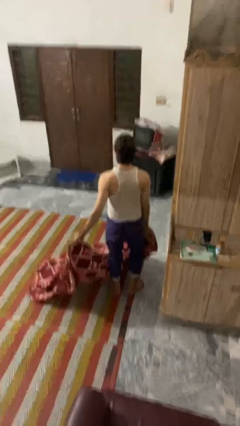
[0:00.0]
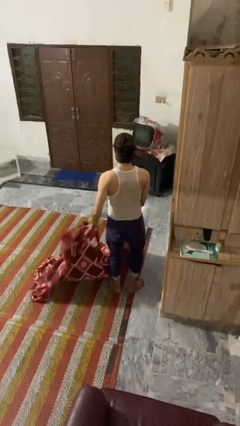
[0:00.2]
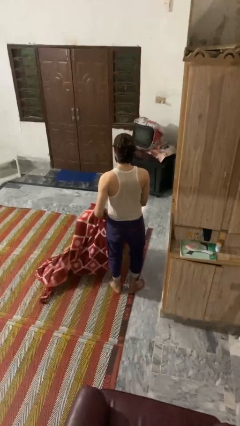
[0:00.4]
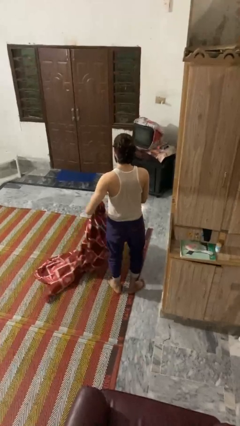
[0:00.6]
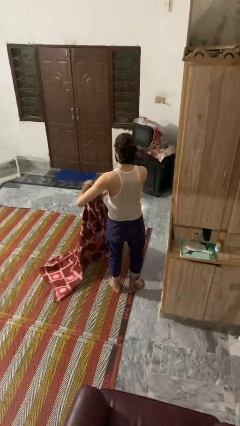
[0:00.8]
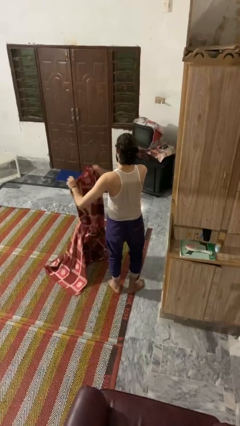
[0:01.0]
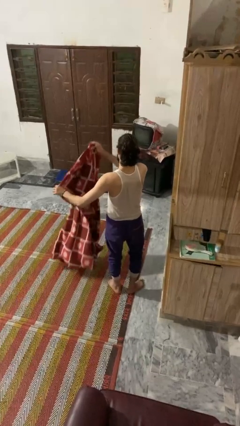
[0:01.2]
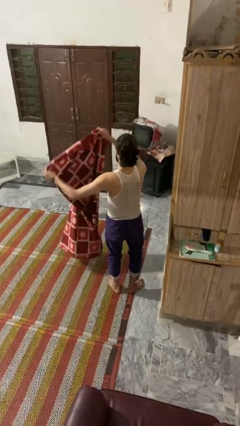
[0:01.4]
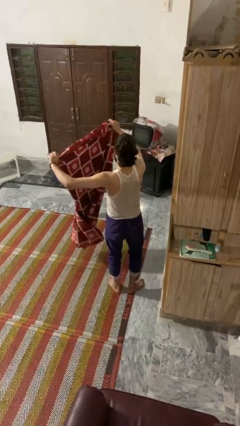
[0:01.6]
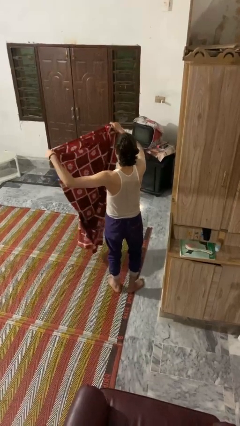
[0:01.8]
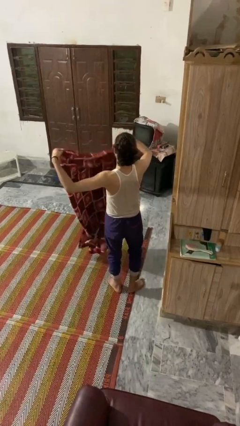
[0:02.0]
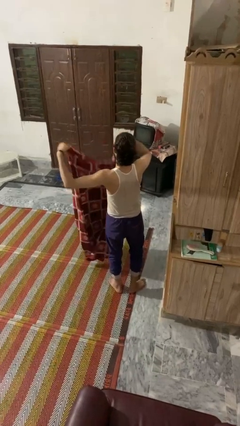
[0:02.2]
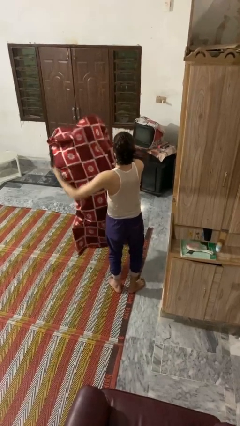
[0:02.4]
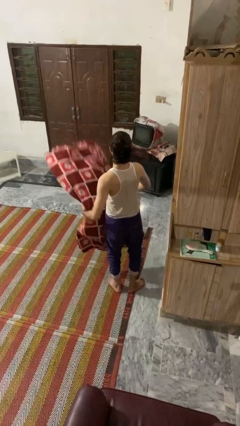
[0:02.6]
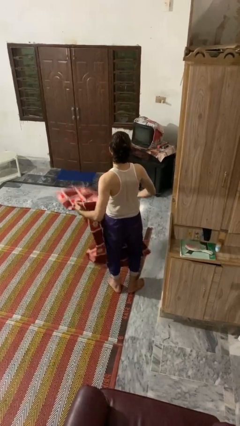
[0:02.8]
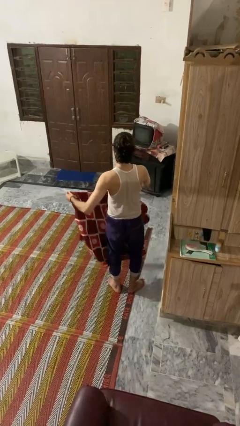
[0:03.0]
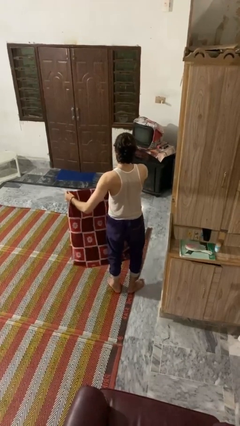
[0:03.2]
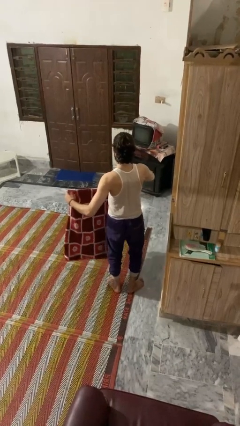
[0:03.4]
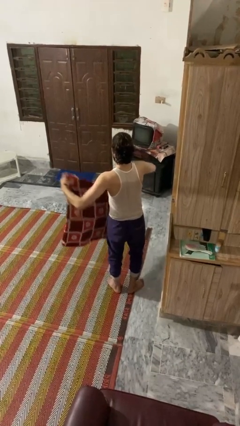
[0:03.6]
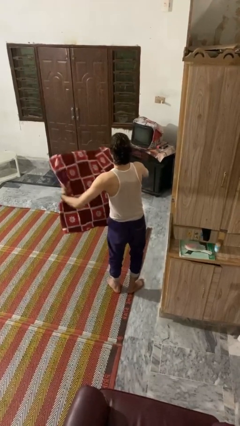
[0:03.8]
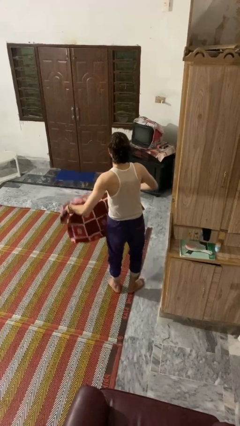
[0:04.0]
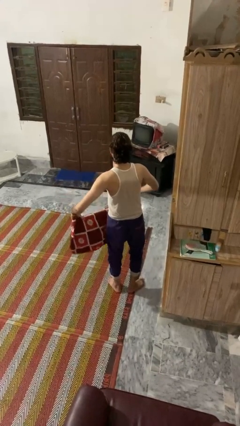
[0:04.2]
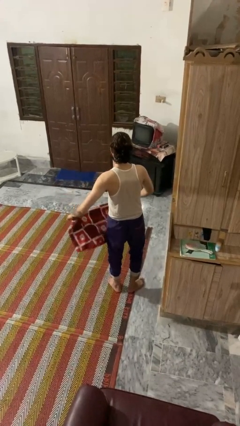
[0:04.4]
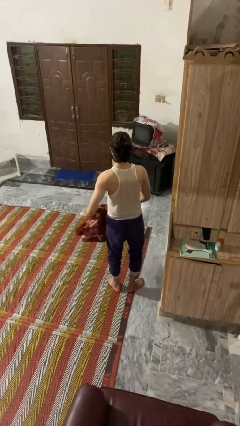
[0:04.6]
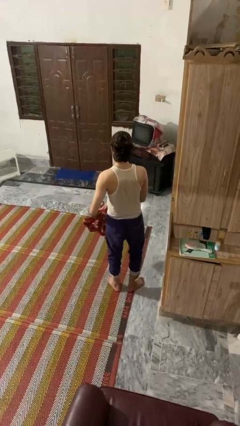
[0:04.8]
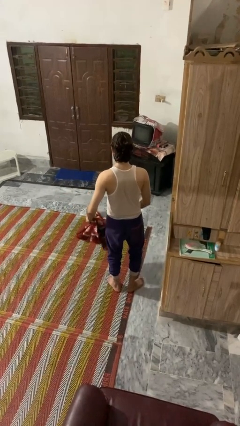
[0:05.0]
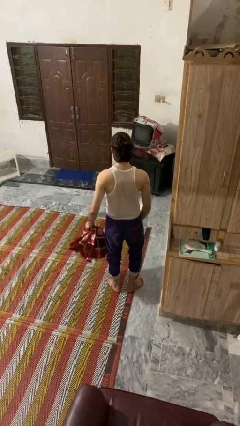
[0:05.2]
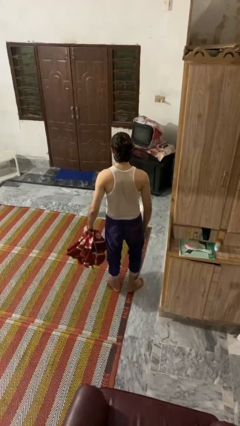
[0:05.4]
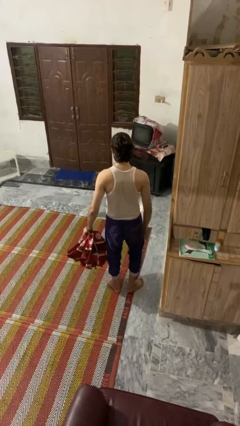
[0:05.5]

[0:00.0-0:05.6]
person folds blanket

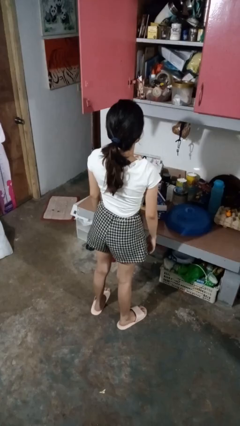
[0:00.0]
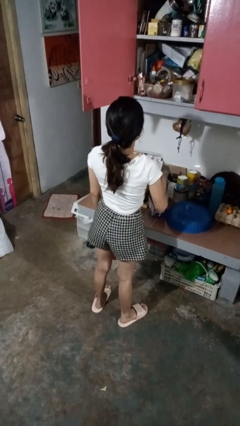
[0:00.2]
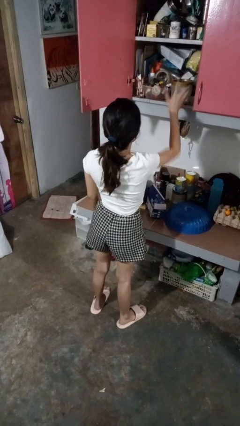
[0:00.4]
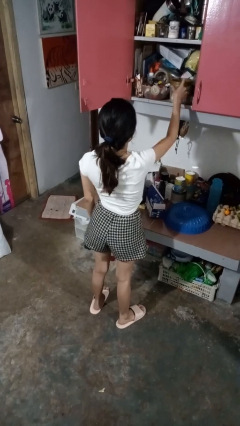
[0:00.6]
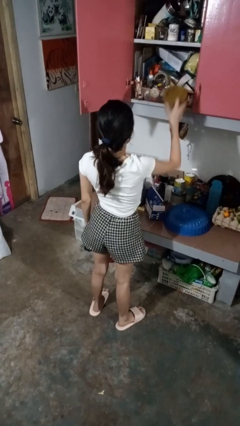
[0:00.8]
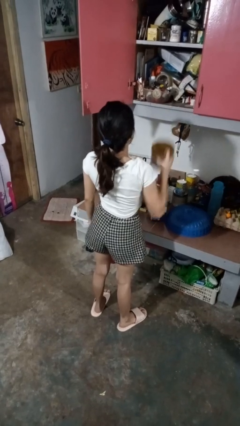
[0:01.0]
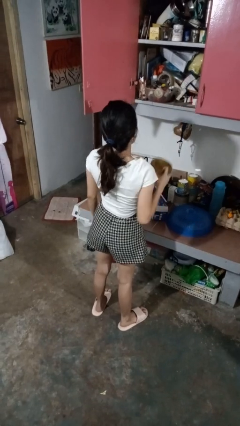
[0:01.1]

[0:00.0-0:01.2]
person picks up object from cabinet

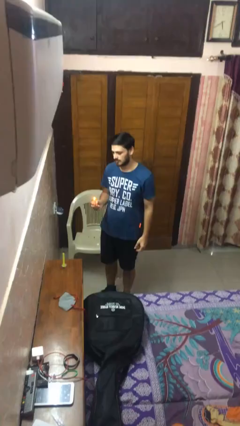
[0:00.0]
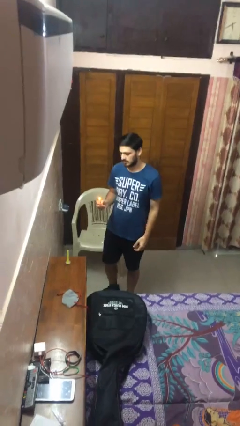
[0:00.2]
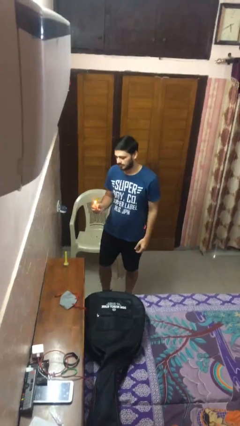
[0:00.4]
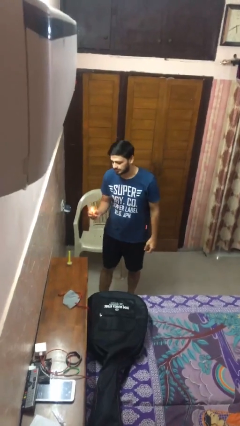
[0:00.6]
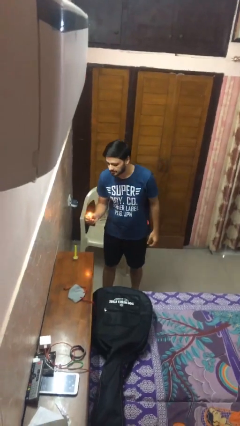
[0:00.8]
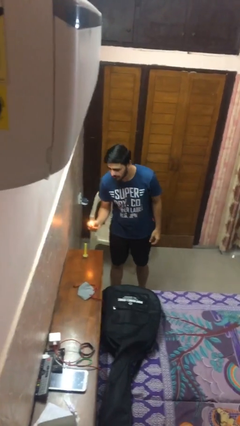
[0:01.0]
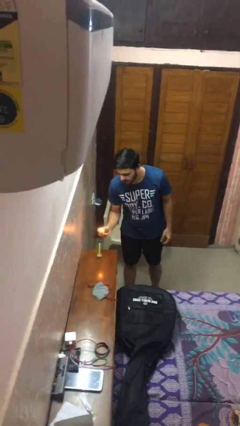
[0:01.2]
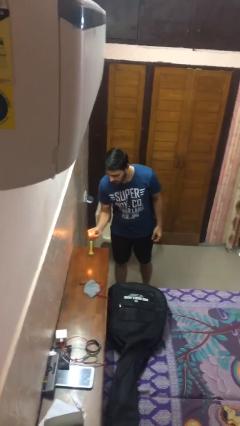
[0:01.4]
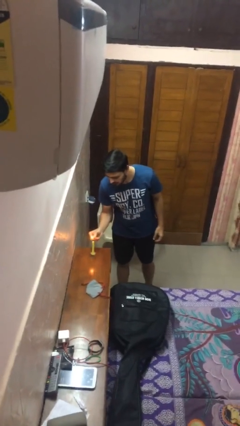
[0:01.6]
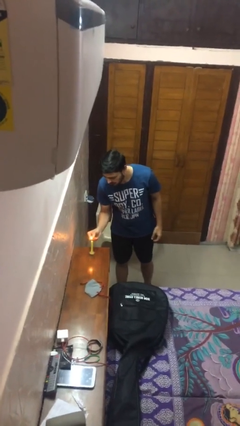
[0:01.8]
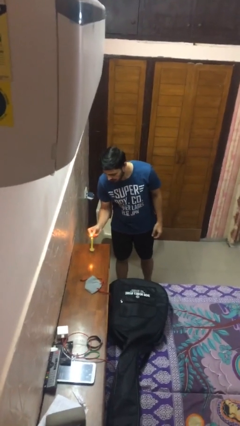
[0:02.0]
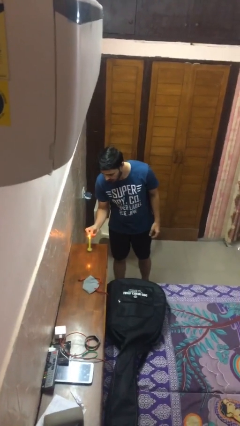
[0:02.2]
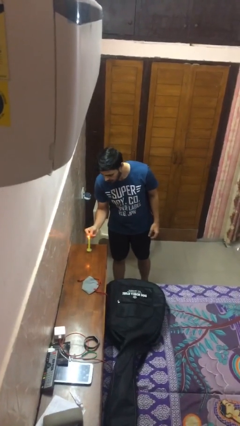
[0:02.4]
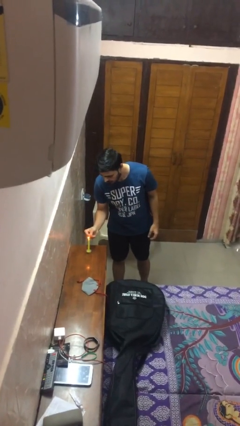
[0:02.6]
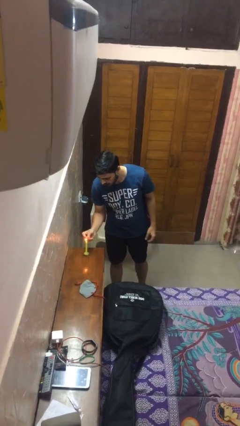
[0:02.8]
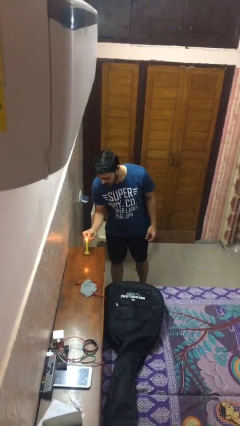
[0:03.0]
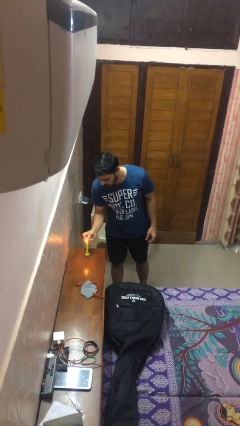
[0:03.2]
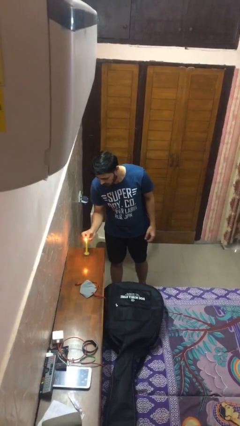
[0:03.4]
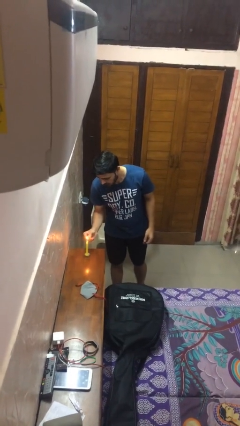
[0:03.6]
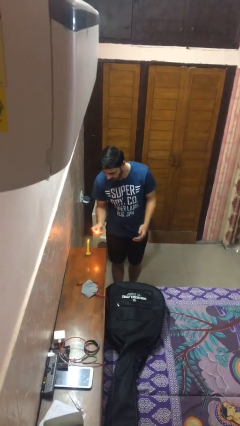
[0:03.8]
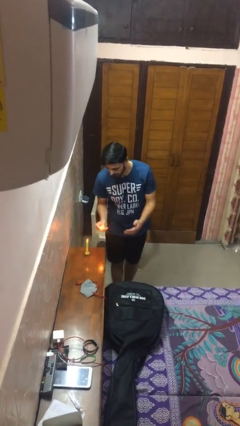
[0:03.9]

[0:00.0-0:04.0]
person lights candle

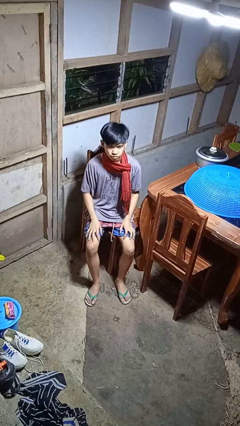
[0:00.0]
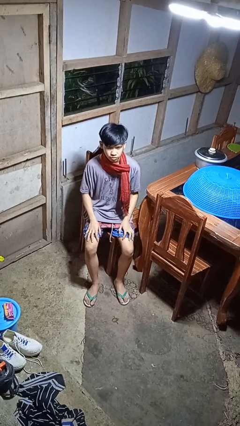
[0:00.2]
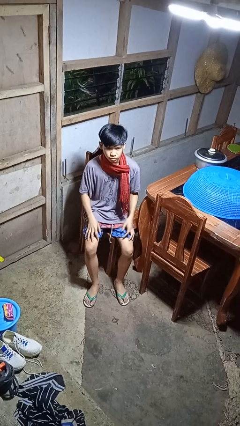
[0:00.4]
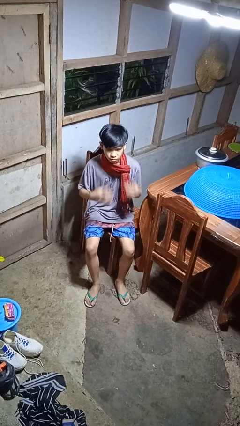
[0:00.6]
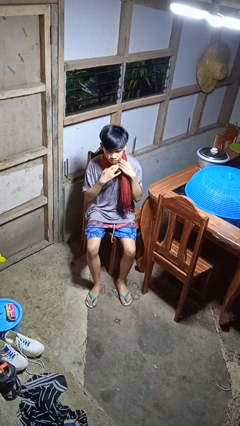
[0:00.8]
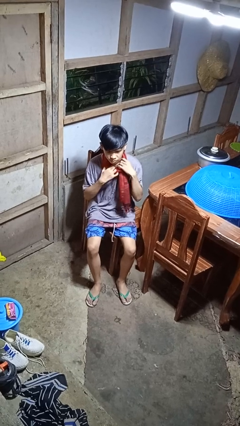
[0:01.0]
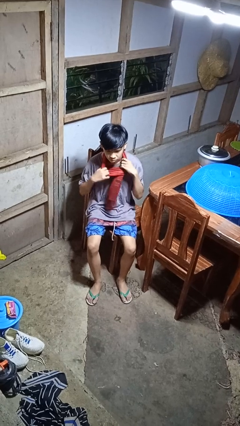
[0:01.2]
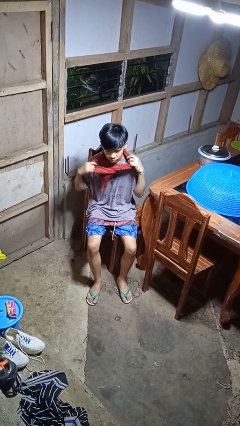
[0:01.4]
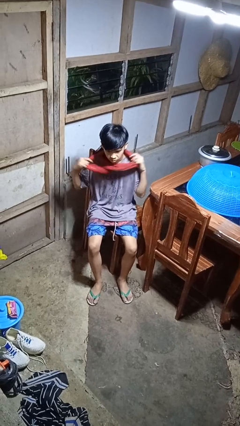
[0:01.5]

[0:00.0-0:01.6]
person takes off scarf

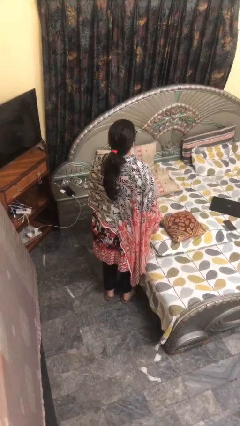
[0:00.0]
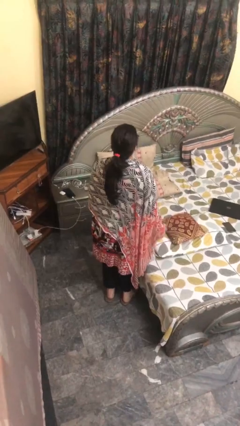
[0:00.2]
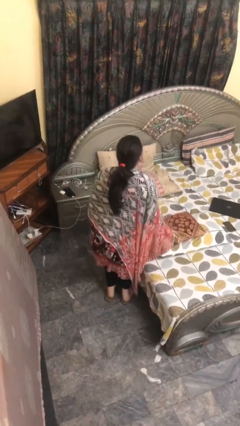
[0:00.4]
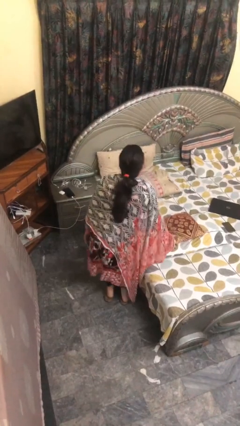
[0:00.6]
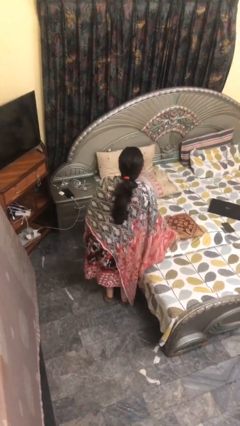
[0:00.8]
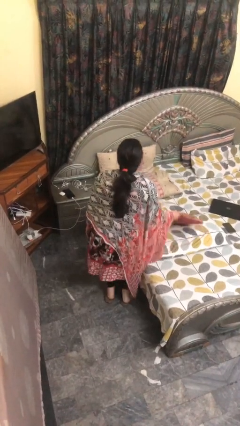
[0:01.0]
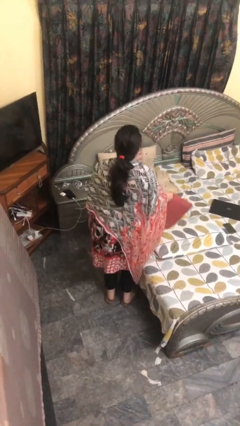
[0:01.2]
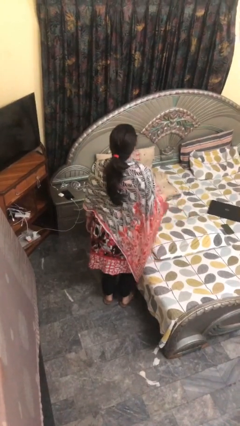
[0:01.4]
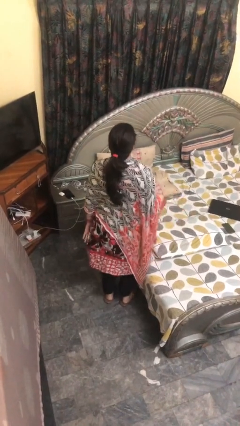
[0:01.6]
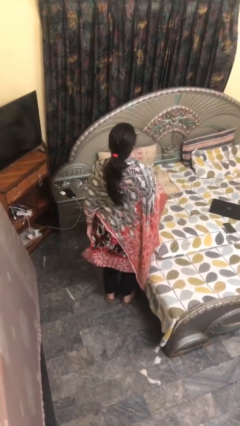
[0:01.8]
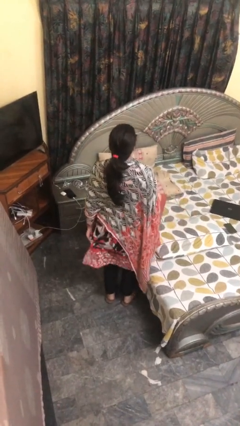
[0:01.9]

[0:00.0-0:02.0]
person picks up object from bed

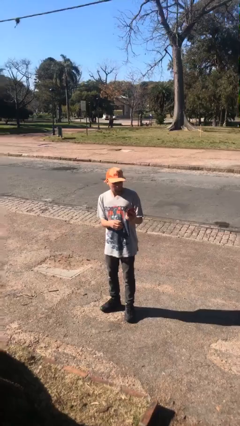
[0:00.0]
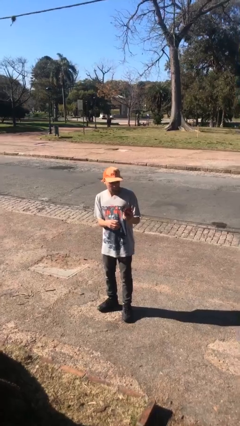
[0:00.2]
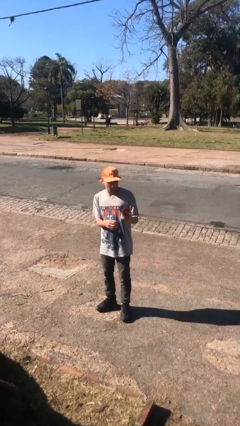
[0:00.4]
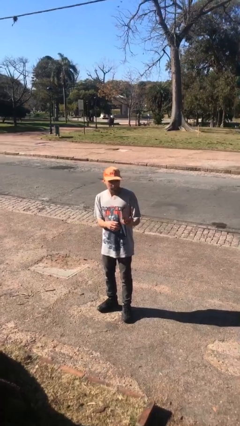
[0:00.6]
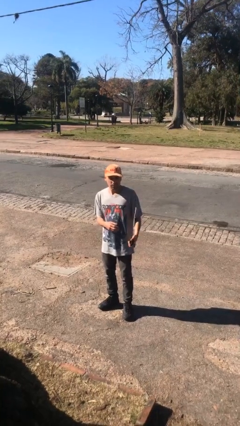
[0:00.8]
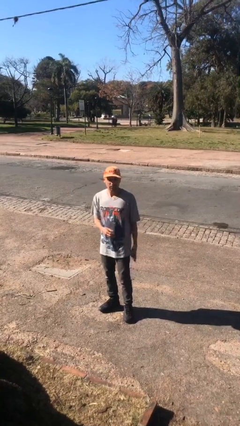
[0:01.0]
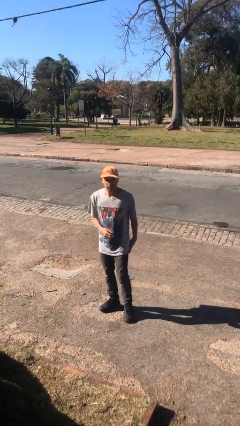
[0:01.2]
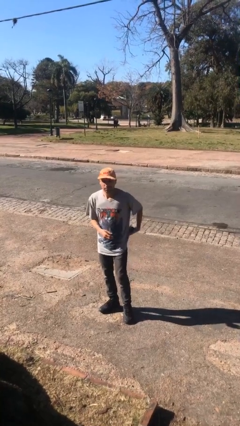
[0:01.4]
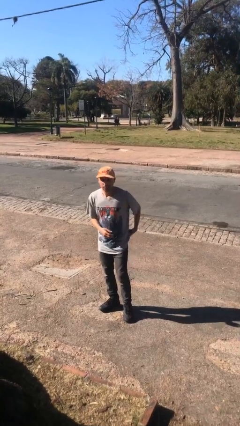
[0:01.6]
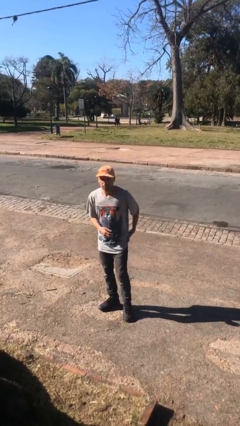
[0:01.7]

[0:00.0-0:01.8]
person puts phone into pocket

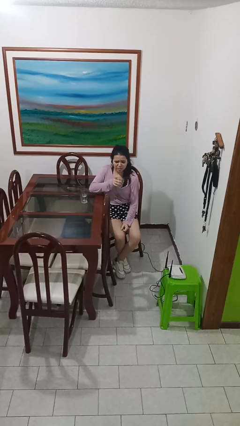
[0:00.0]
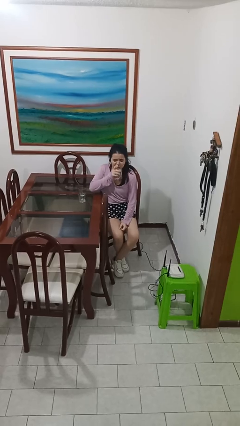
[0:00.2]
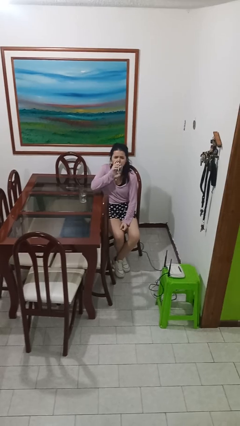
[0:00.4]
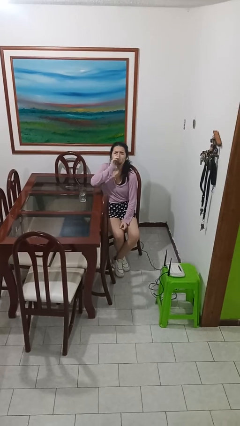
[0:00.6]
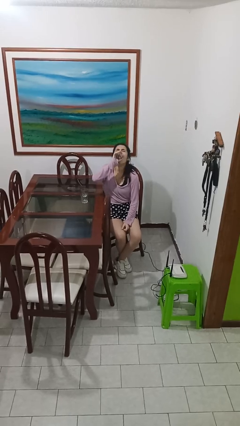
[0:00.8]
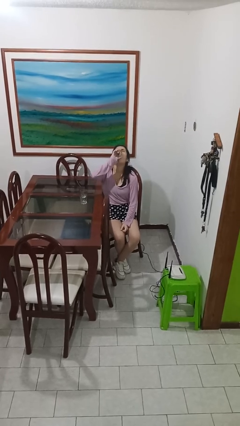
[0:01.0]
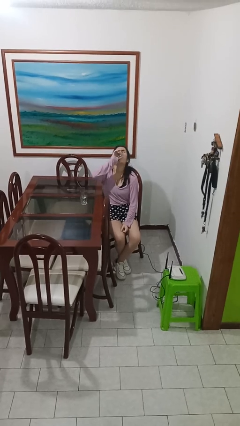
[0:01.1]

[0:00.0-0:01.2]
person drinks from shotglass
